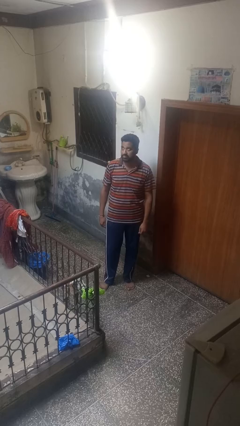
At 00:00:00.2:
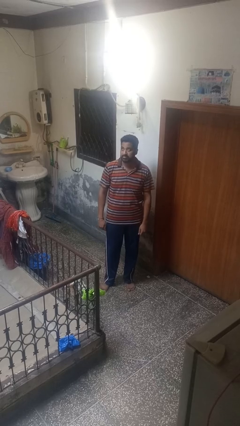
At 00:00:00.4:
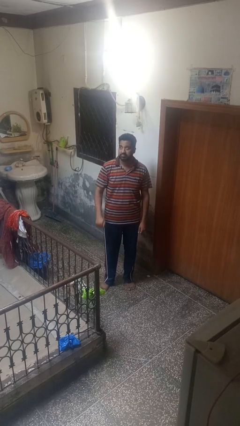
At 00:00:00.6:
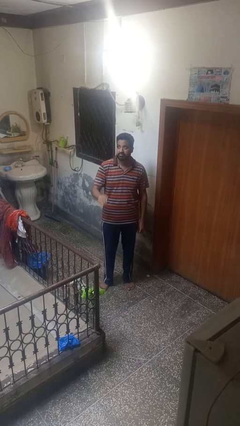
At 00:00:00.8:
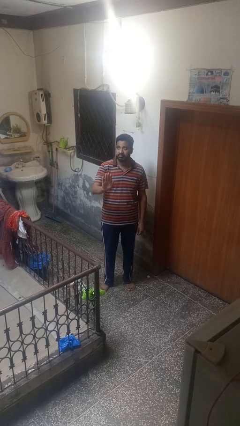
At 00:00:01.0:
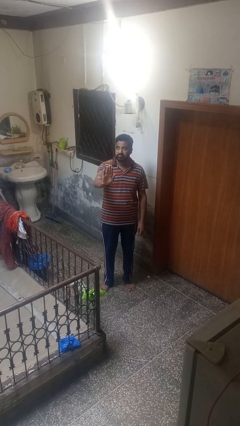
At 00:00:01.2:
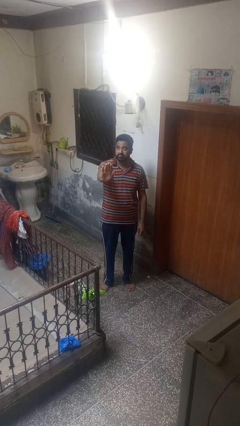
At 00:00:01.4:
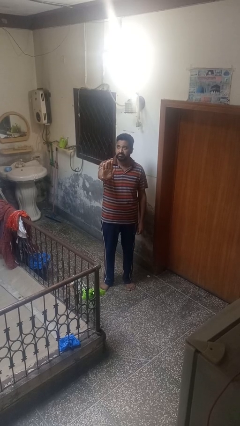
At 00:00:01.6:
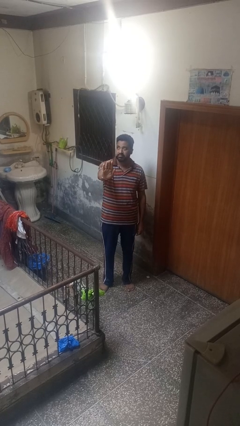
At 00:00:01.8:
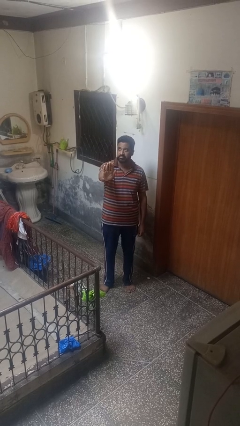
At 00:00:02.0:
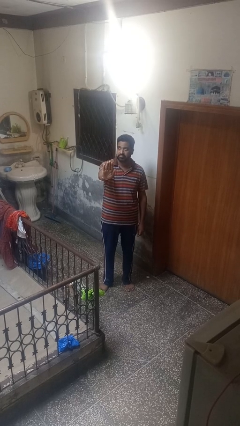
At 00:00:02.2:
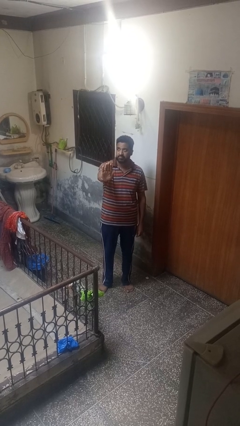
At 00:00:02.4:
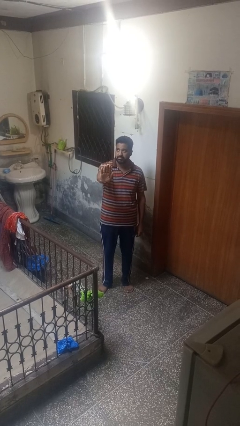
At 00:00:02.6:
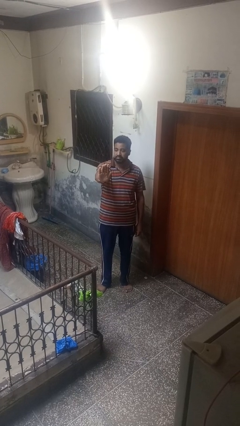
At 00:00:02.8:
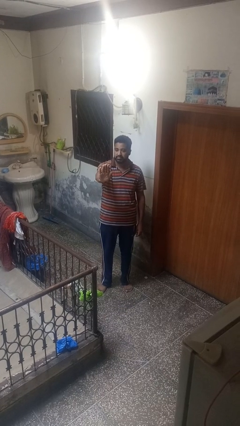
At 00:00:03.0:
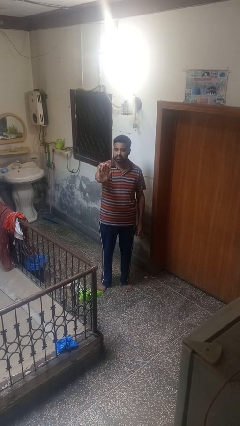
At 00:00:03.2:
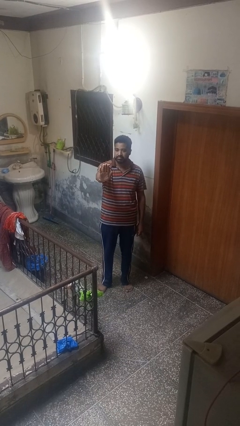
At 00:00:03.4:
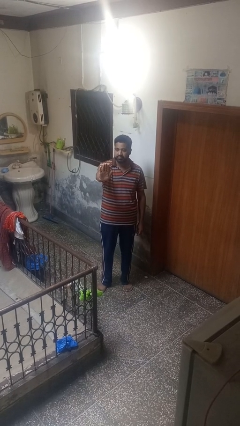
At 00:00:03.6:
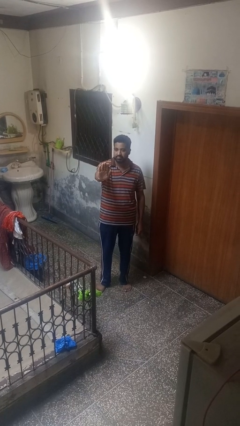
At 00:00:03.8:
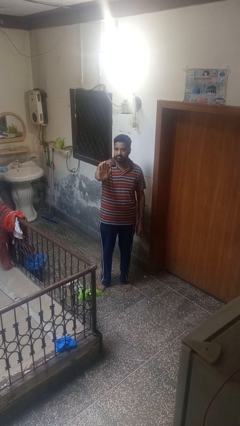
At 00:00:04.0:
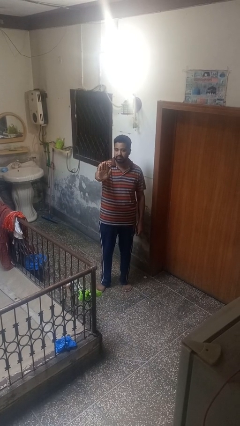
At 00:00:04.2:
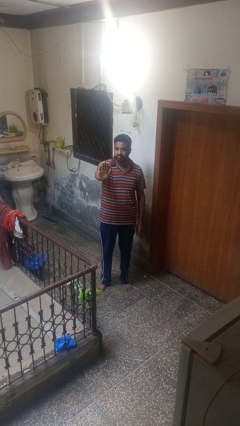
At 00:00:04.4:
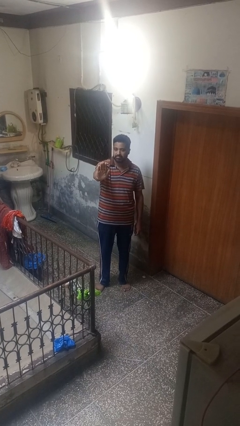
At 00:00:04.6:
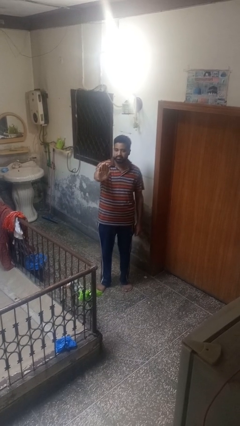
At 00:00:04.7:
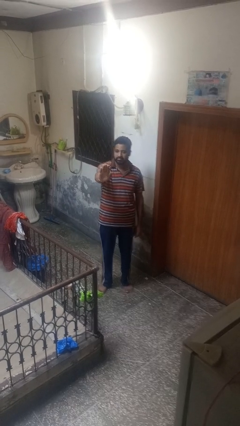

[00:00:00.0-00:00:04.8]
person gestures stop

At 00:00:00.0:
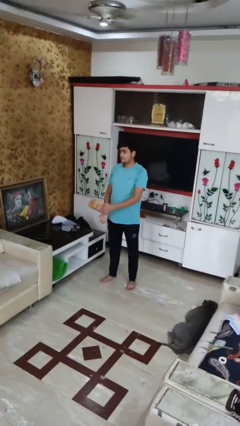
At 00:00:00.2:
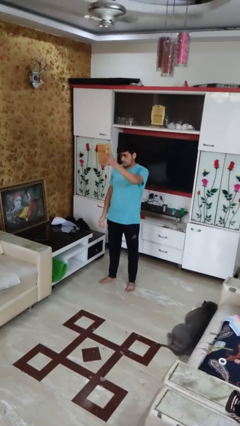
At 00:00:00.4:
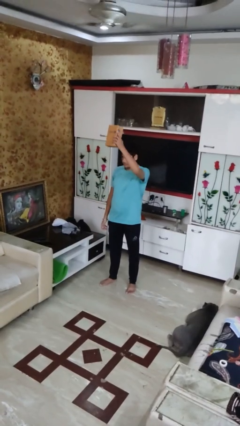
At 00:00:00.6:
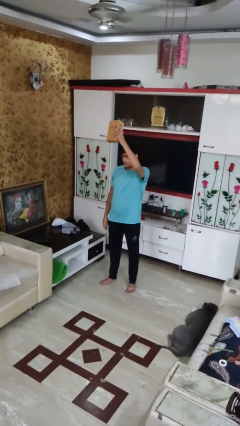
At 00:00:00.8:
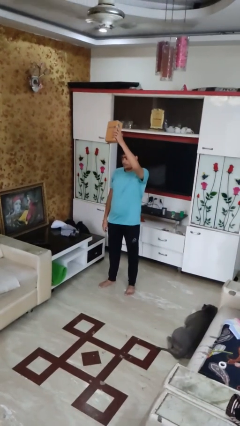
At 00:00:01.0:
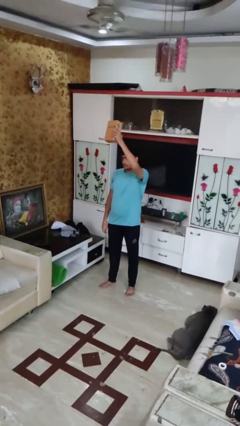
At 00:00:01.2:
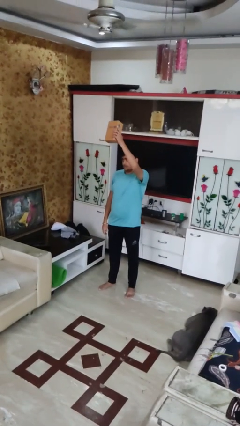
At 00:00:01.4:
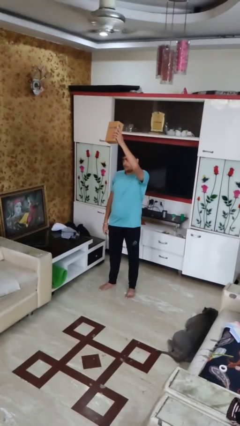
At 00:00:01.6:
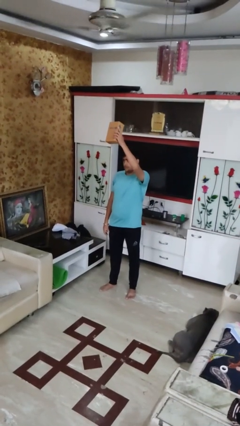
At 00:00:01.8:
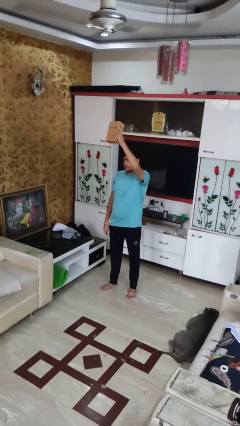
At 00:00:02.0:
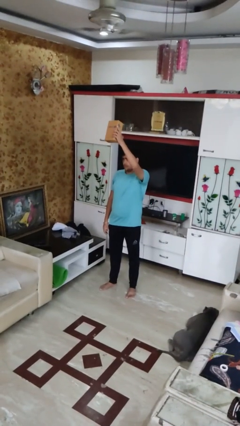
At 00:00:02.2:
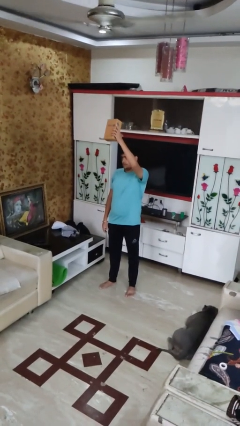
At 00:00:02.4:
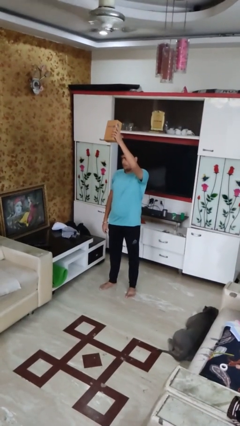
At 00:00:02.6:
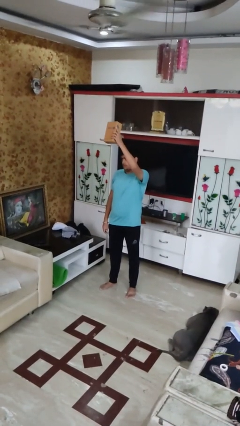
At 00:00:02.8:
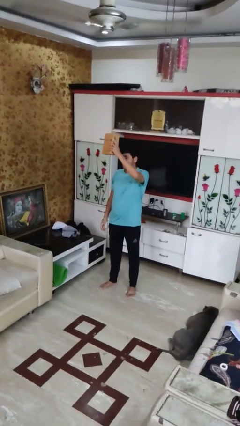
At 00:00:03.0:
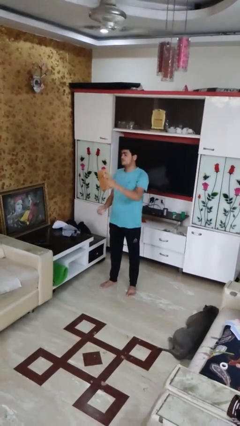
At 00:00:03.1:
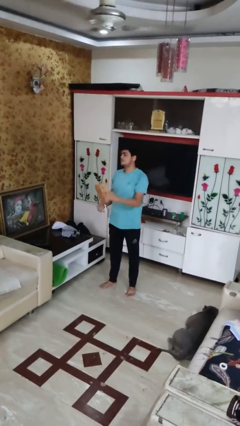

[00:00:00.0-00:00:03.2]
person holds object above head

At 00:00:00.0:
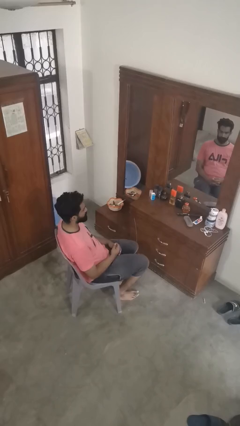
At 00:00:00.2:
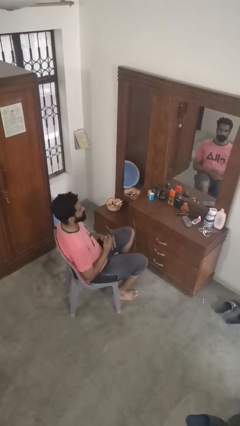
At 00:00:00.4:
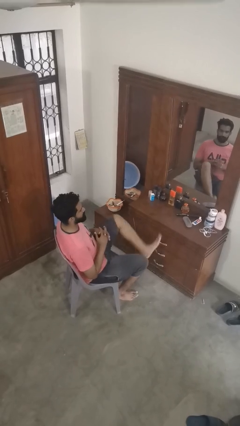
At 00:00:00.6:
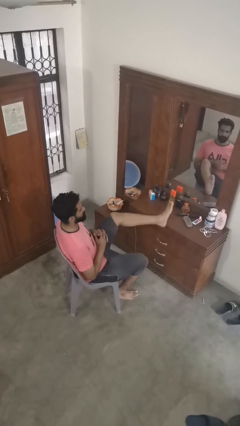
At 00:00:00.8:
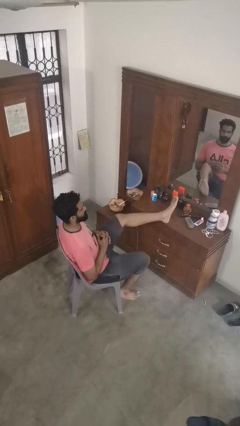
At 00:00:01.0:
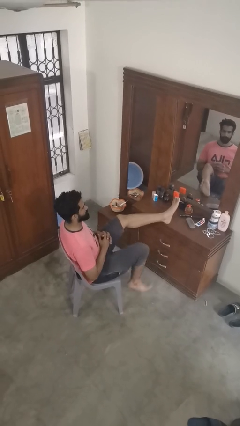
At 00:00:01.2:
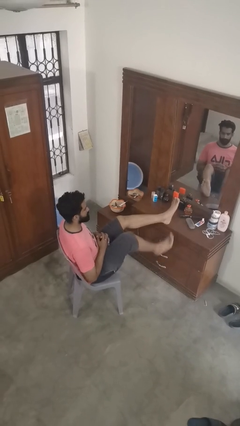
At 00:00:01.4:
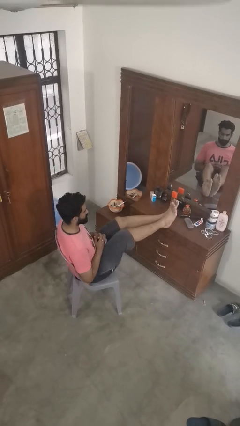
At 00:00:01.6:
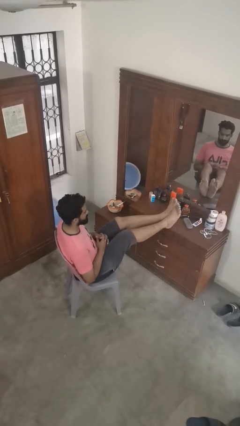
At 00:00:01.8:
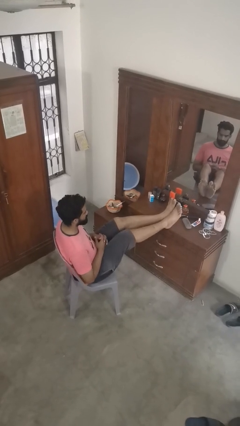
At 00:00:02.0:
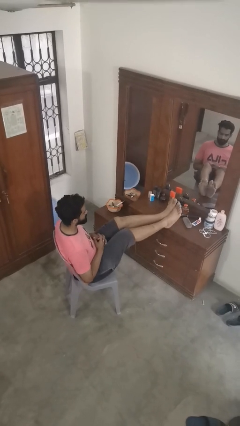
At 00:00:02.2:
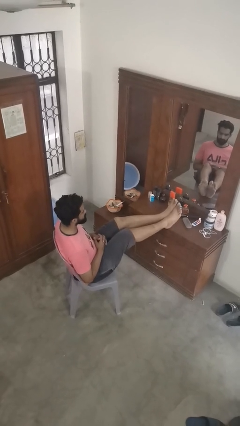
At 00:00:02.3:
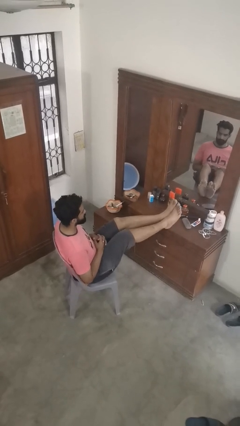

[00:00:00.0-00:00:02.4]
person puts feet up

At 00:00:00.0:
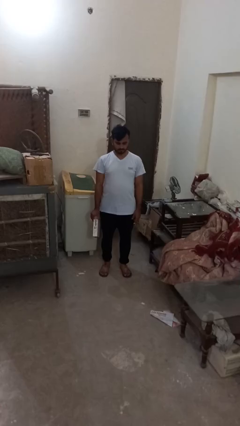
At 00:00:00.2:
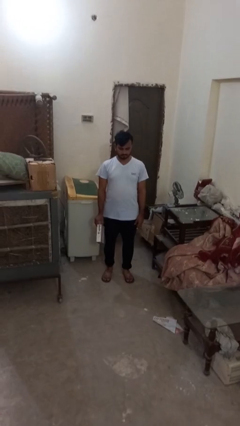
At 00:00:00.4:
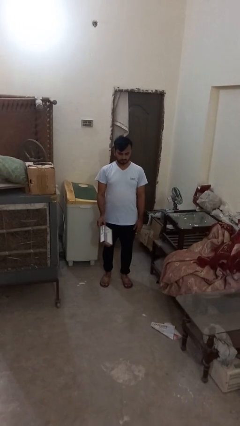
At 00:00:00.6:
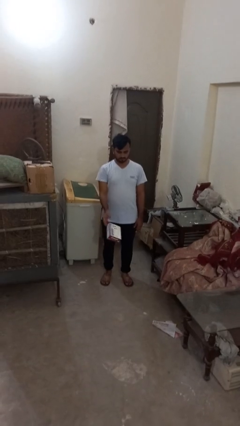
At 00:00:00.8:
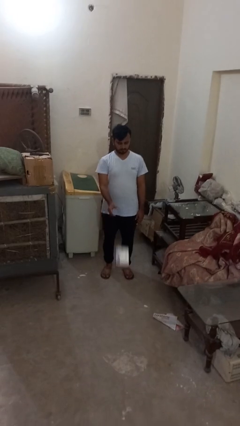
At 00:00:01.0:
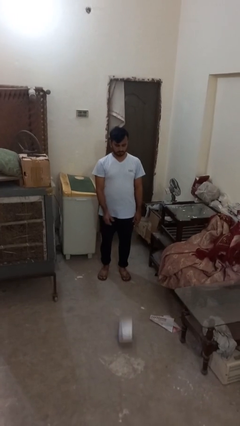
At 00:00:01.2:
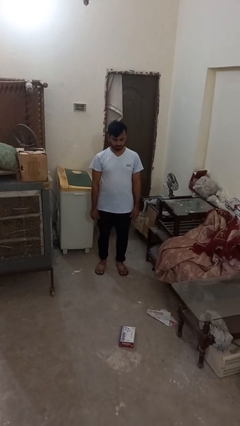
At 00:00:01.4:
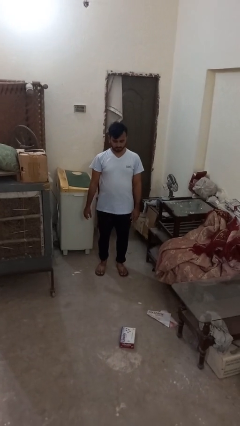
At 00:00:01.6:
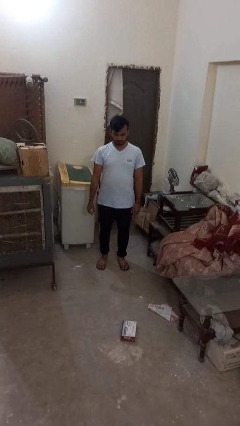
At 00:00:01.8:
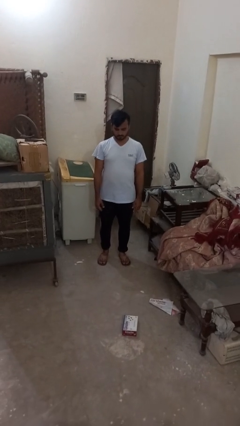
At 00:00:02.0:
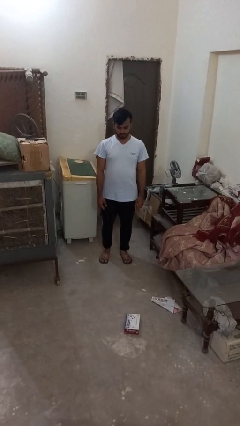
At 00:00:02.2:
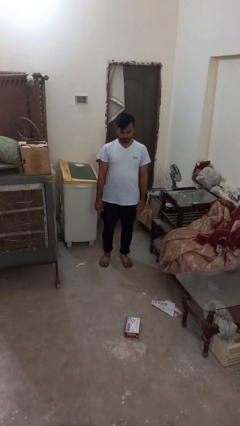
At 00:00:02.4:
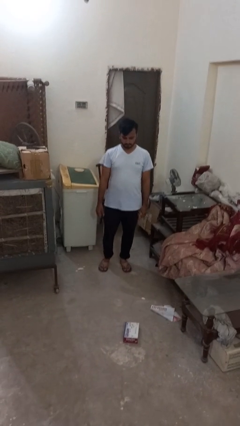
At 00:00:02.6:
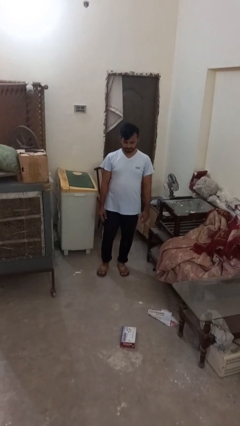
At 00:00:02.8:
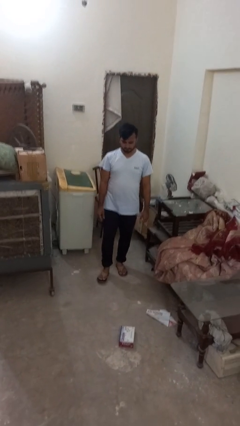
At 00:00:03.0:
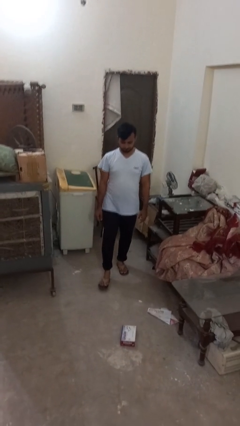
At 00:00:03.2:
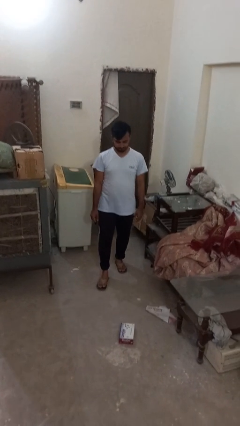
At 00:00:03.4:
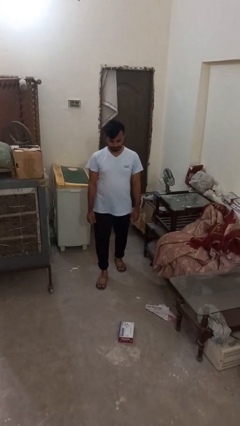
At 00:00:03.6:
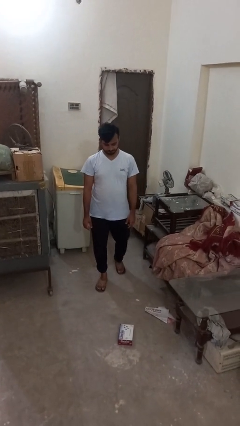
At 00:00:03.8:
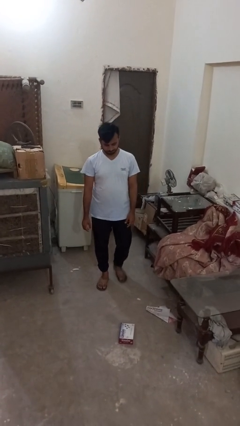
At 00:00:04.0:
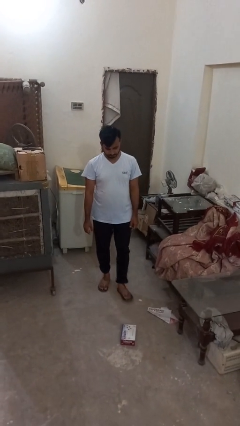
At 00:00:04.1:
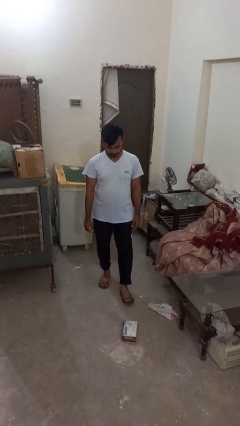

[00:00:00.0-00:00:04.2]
person throws object to ground

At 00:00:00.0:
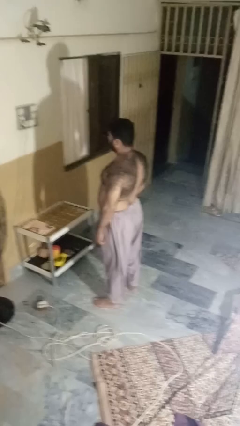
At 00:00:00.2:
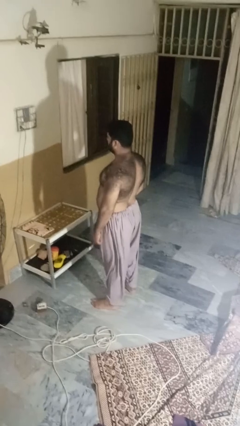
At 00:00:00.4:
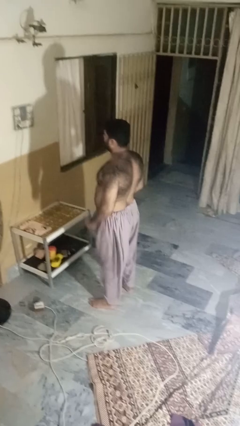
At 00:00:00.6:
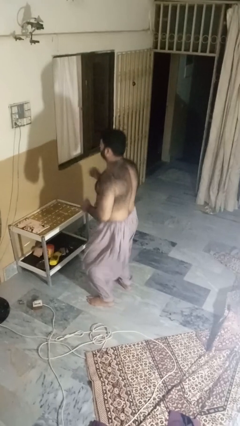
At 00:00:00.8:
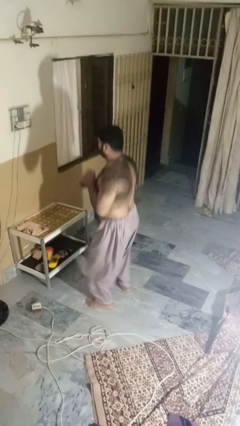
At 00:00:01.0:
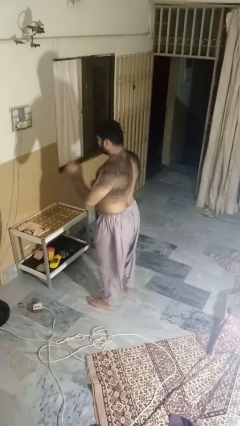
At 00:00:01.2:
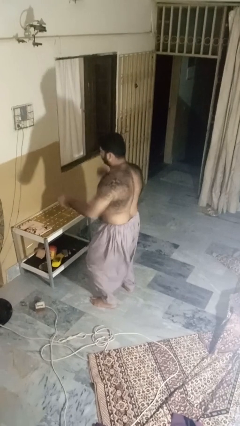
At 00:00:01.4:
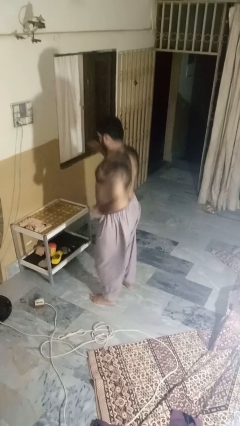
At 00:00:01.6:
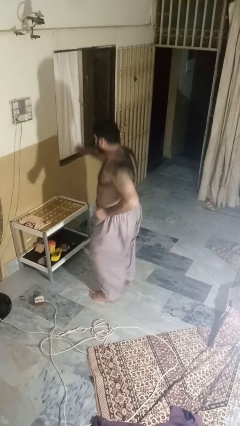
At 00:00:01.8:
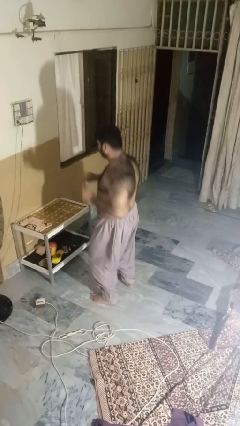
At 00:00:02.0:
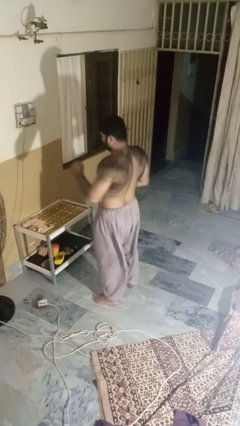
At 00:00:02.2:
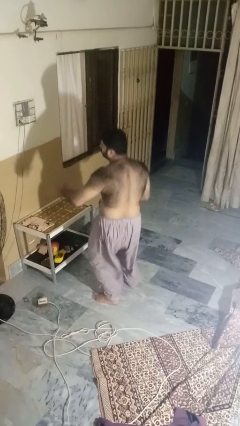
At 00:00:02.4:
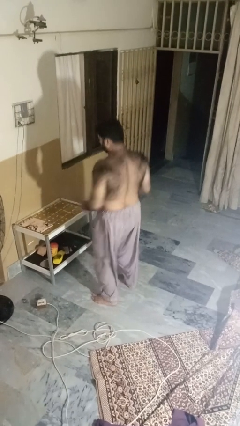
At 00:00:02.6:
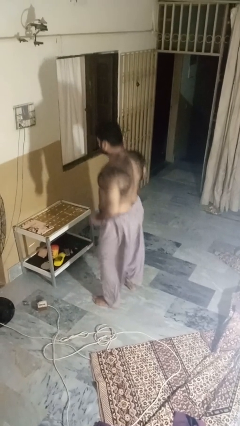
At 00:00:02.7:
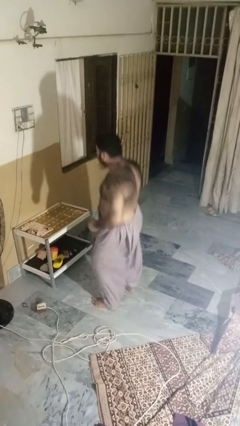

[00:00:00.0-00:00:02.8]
person dances in place
